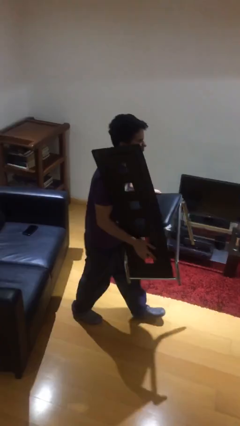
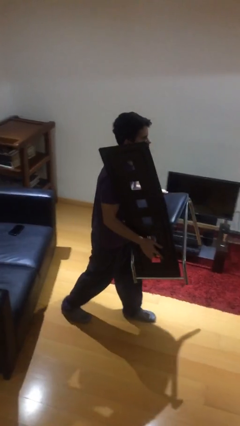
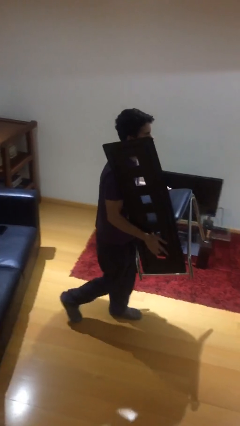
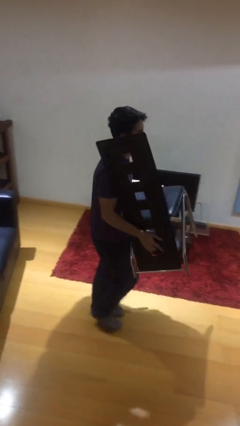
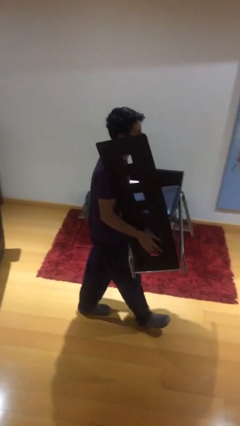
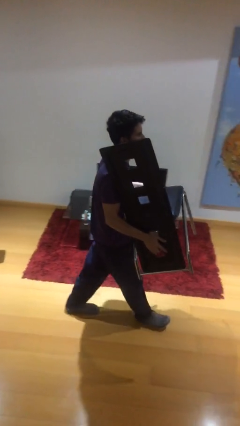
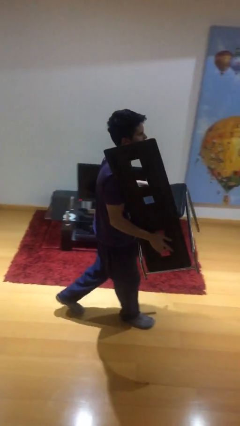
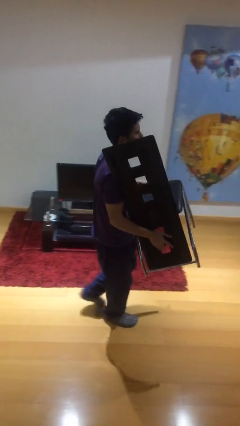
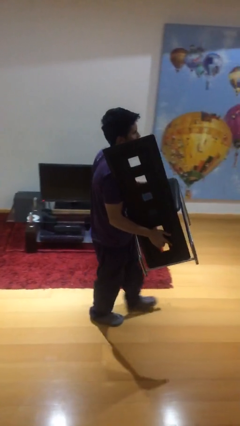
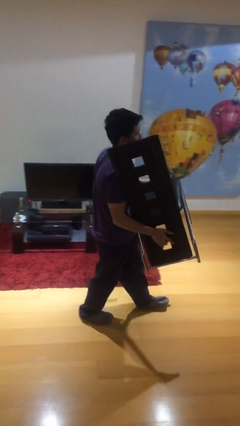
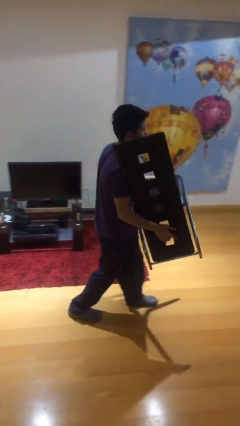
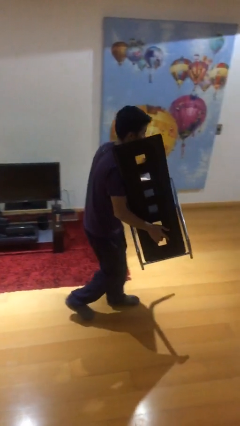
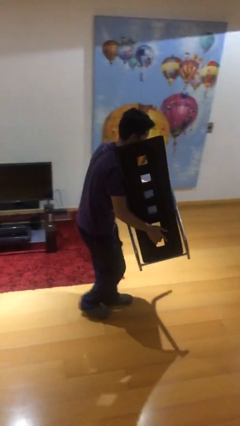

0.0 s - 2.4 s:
person carries heavy object

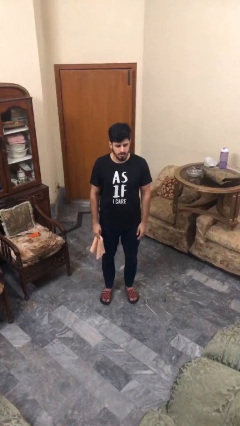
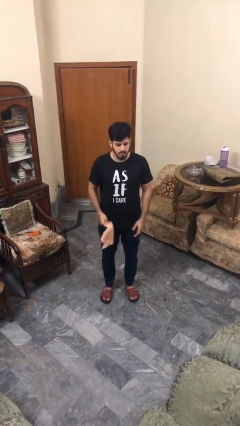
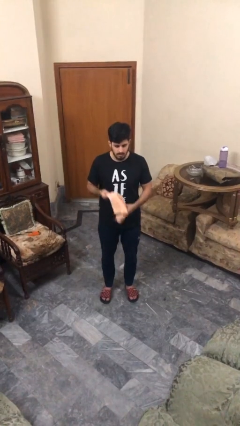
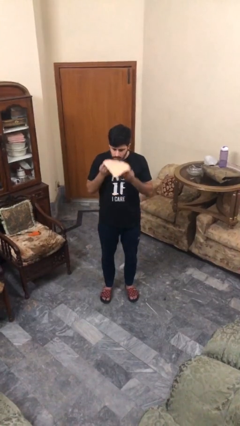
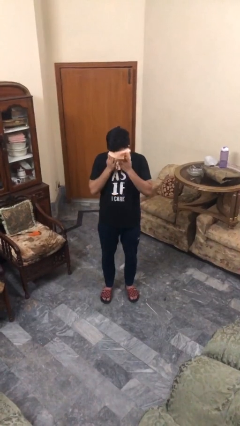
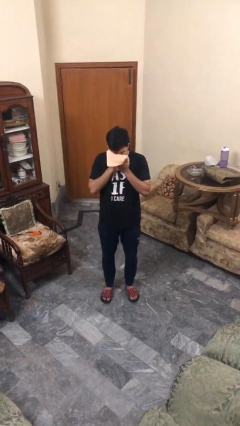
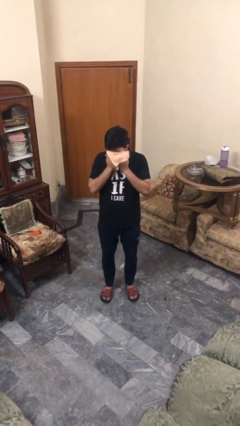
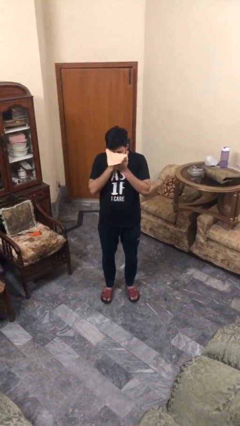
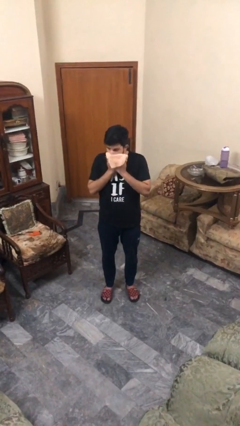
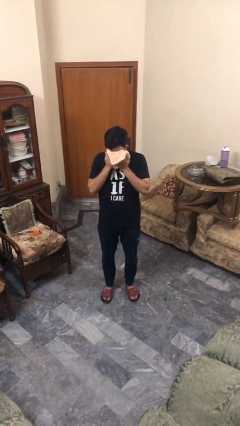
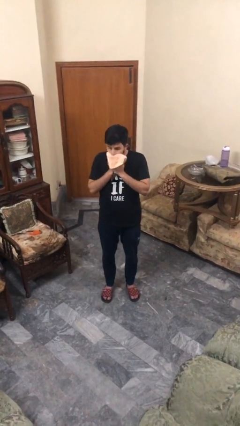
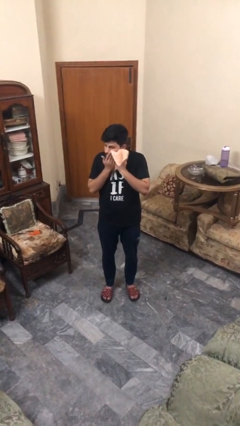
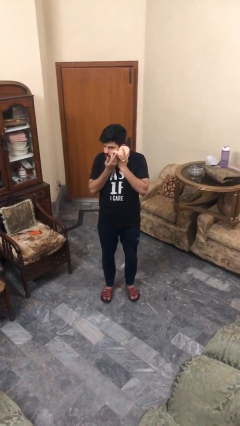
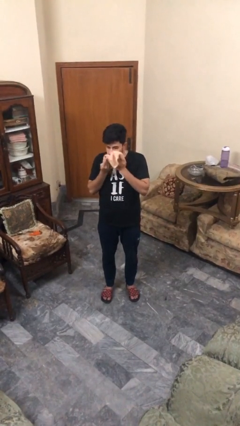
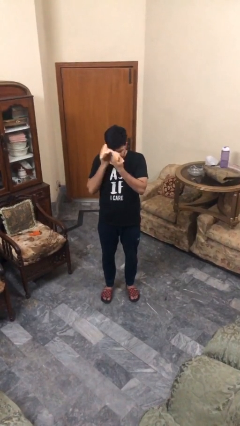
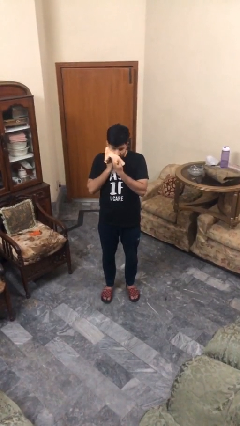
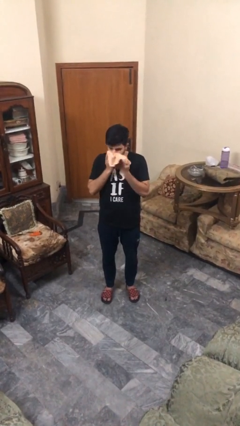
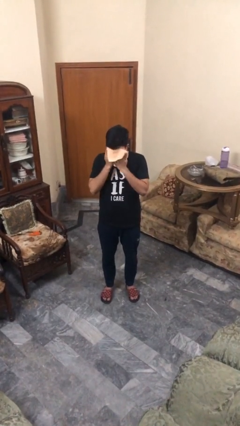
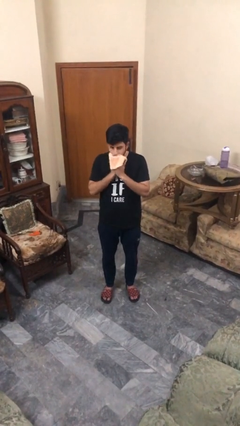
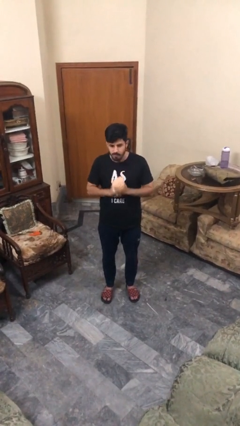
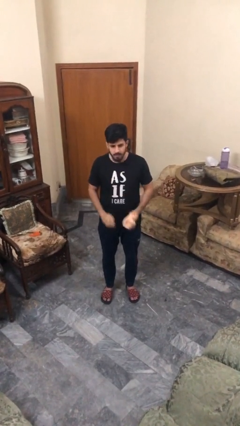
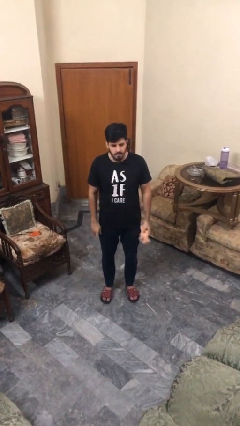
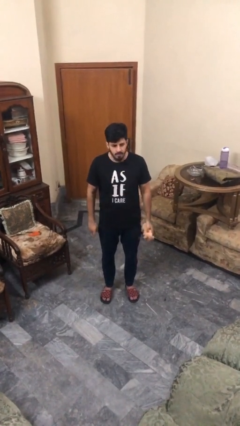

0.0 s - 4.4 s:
person wipes mouth with napkin

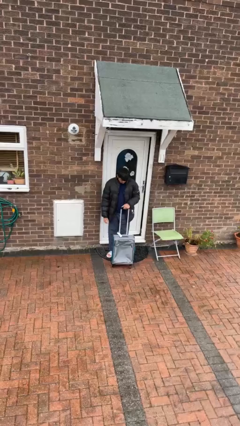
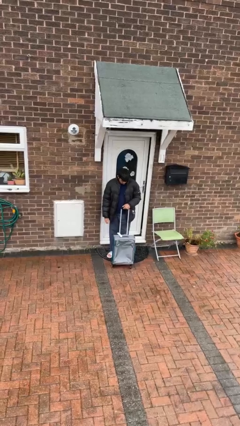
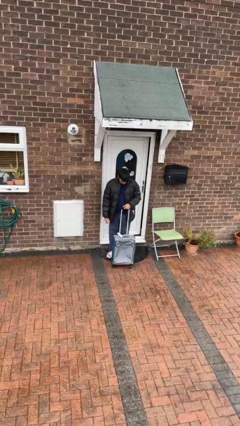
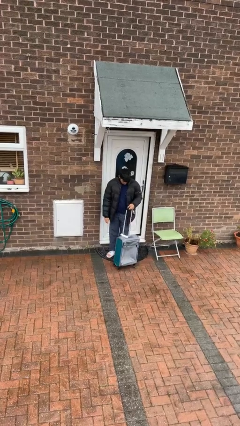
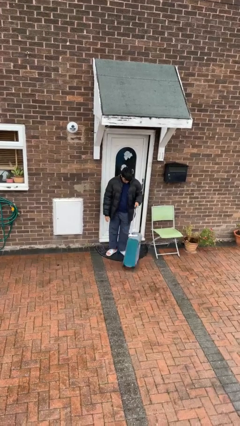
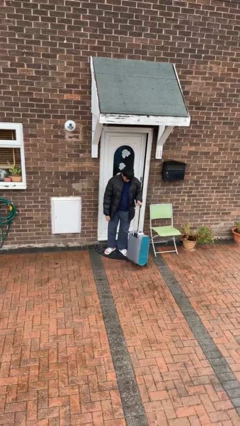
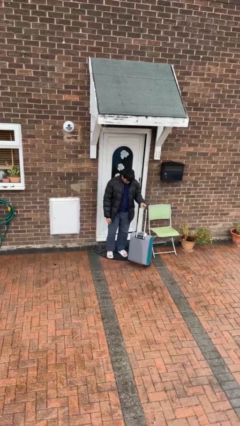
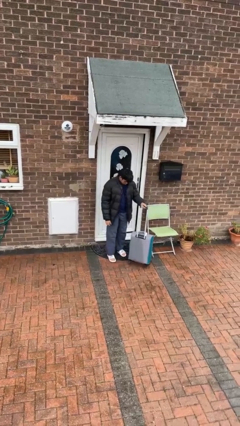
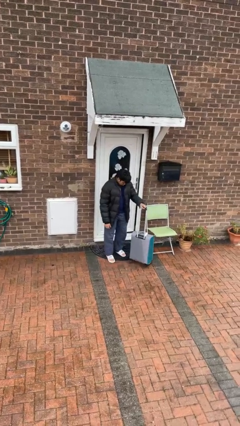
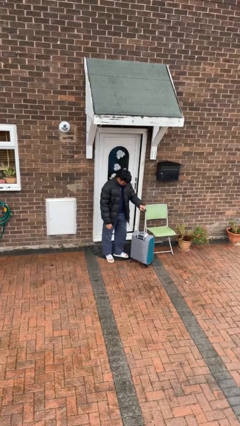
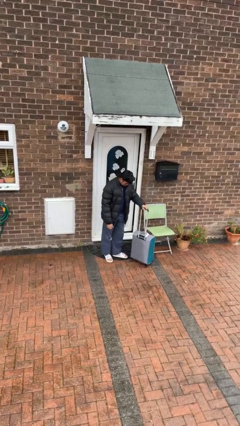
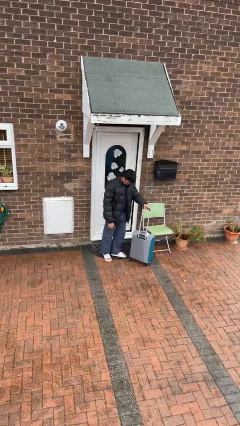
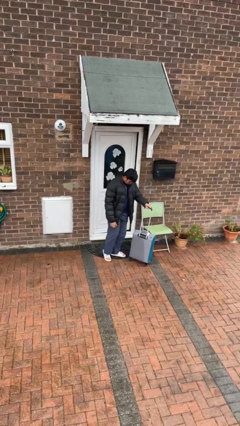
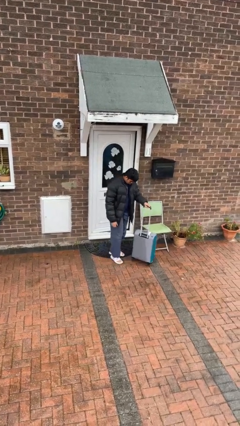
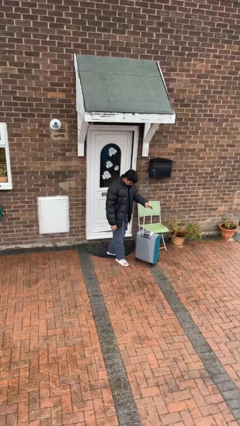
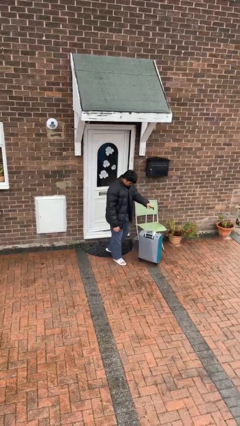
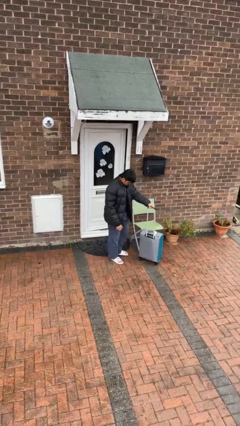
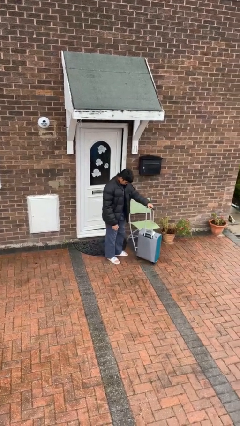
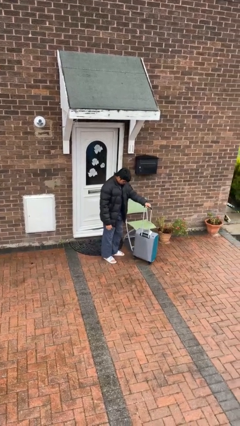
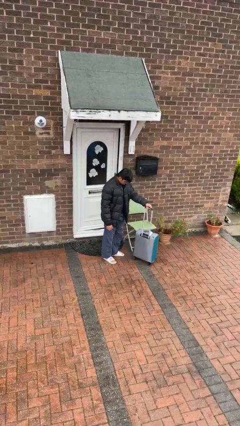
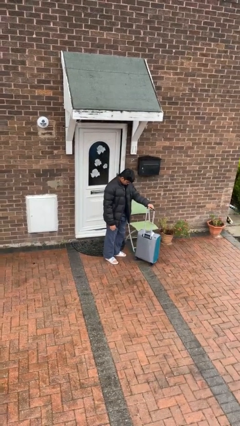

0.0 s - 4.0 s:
person pushes wheeled cart

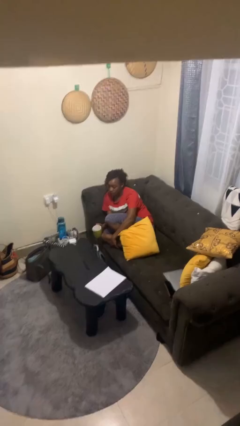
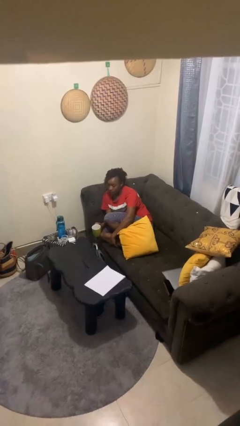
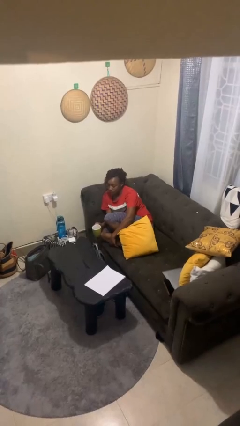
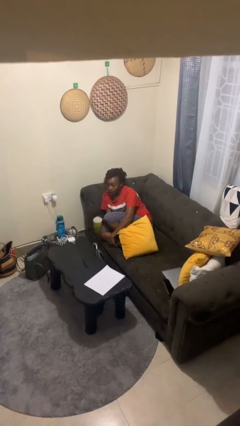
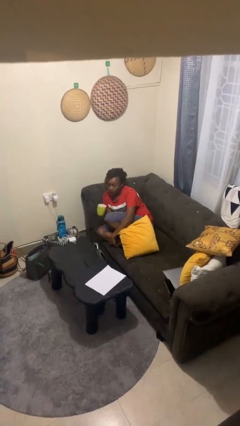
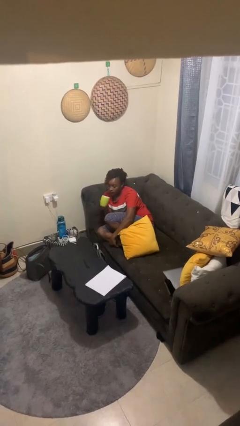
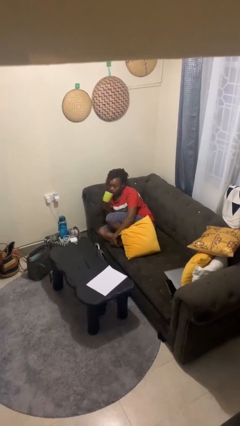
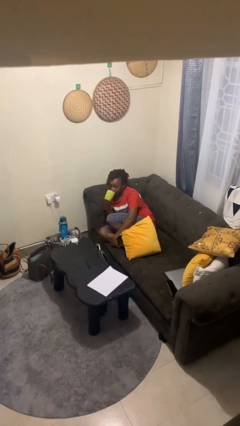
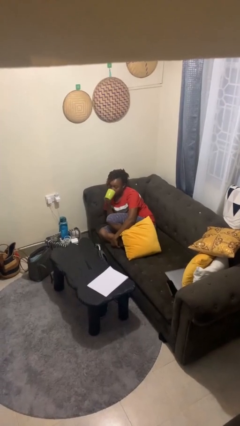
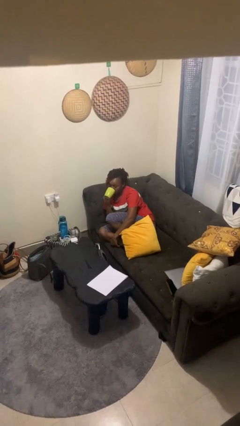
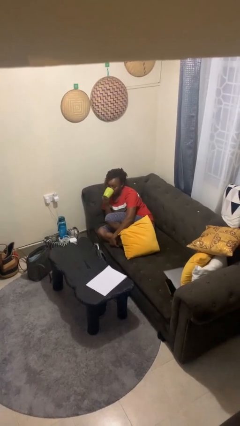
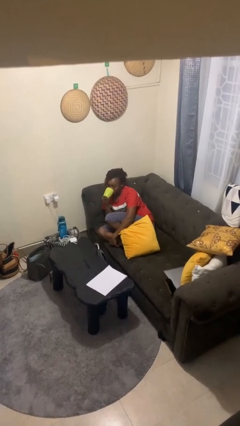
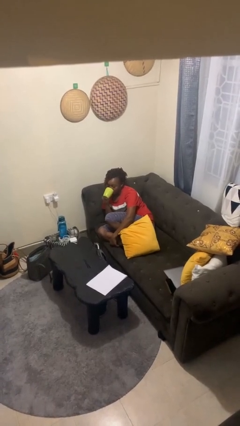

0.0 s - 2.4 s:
person drinks from mug

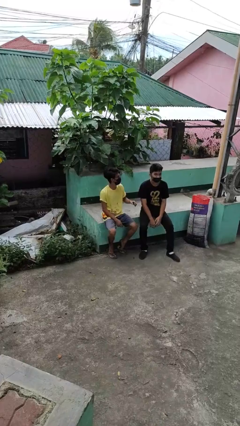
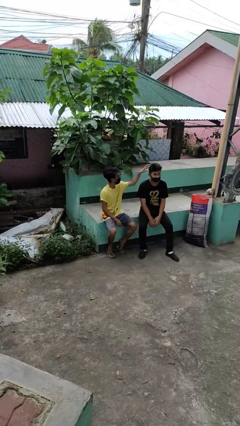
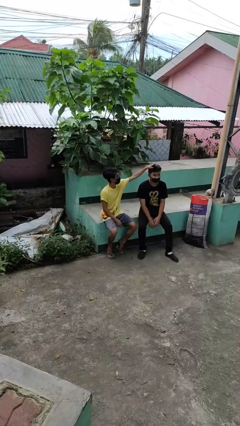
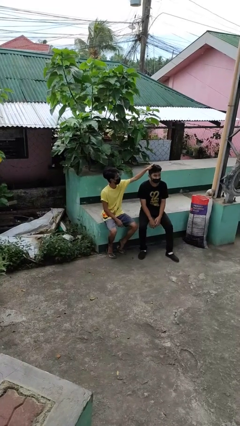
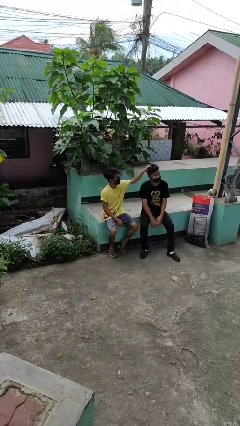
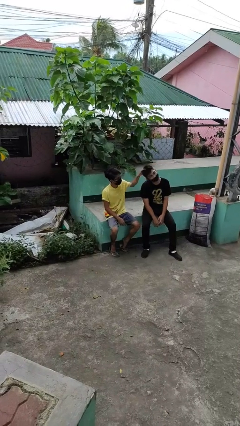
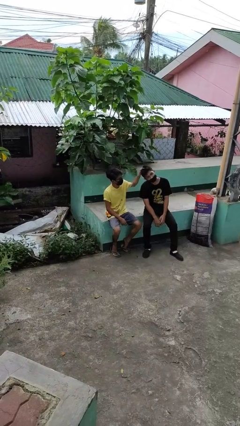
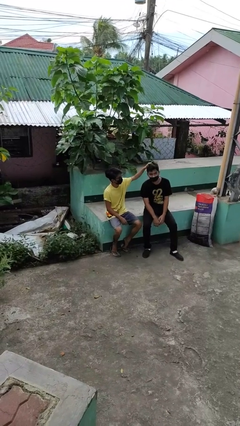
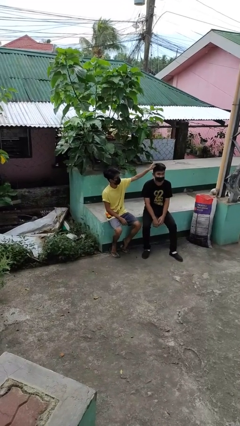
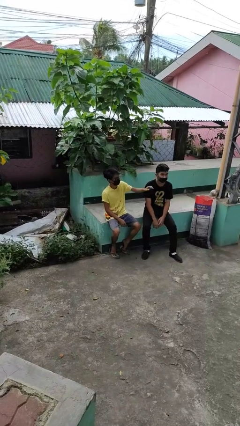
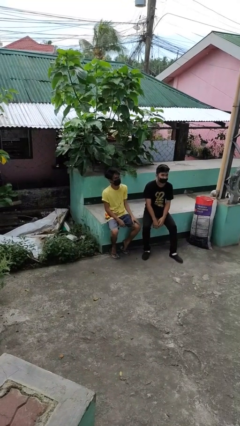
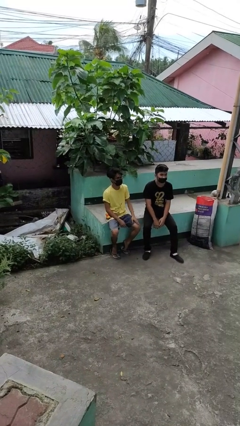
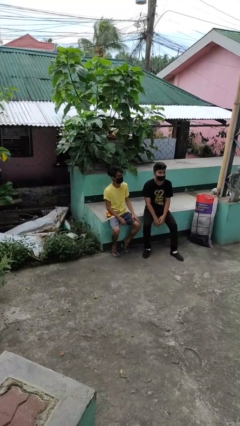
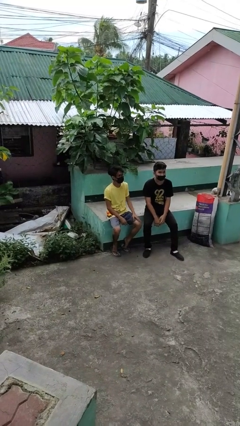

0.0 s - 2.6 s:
person grabs person by hair

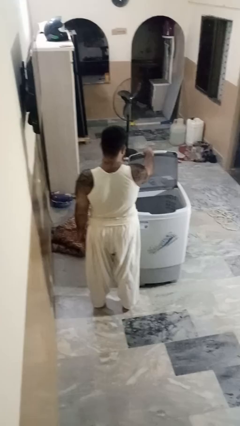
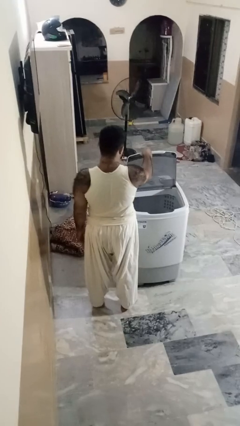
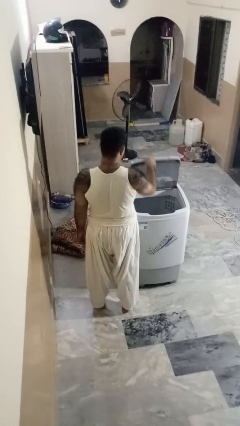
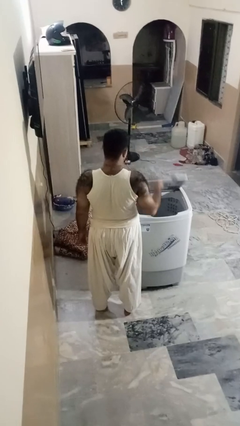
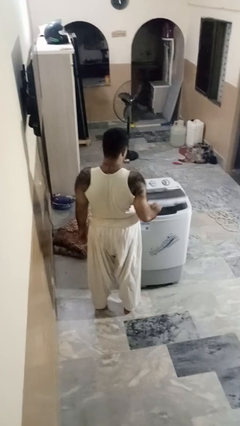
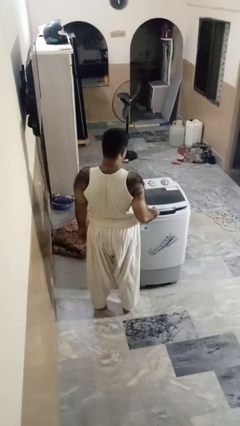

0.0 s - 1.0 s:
person closes clothes washer
